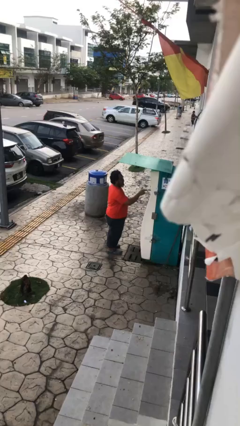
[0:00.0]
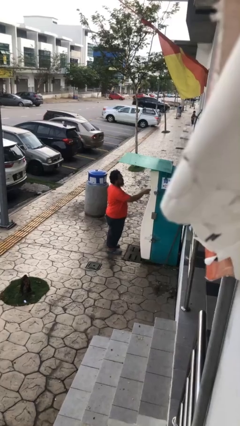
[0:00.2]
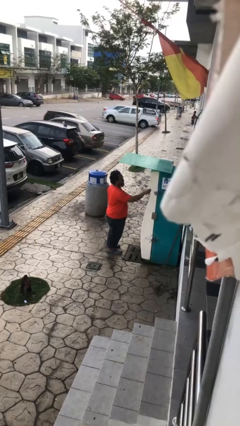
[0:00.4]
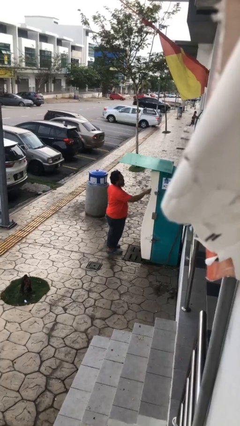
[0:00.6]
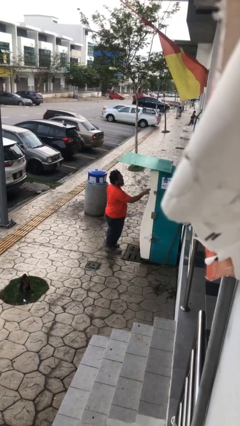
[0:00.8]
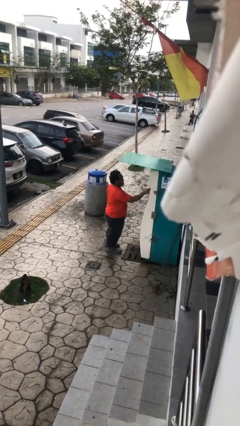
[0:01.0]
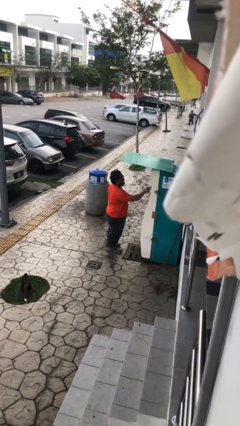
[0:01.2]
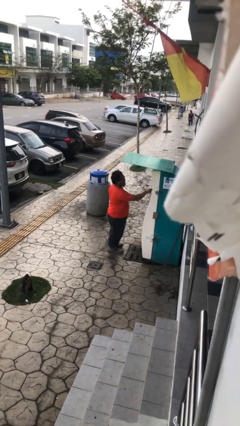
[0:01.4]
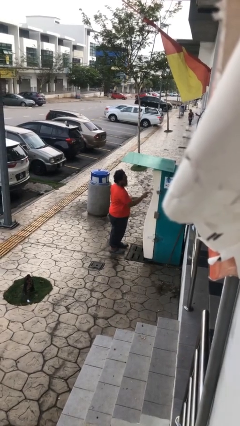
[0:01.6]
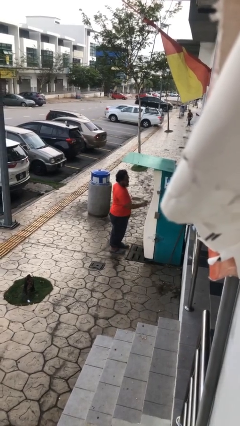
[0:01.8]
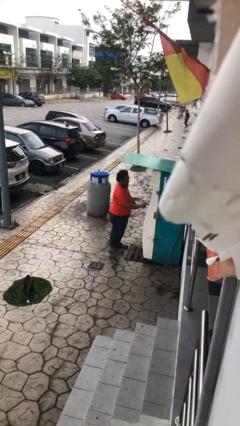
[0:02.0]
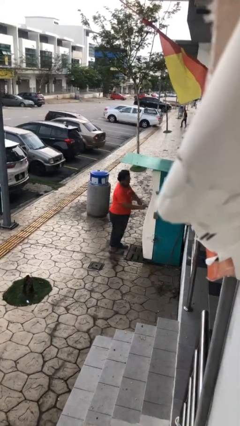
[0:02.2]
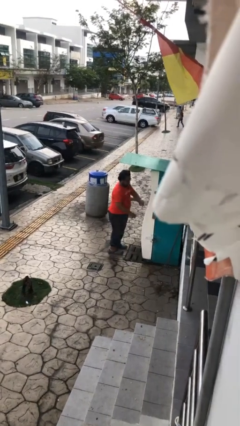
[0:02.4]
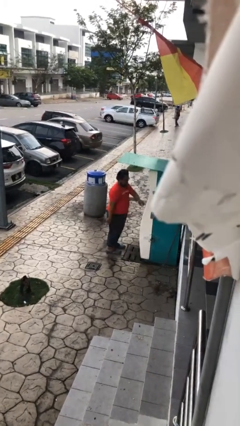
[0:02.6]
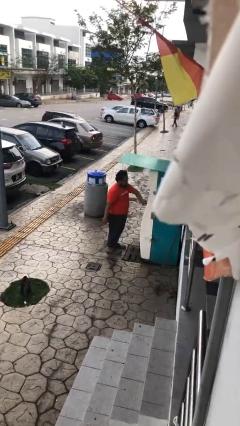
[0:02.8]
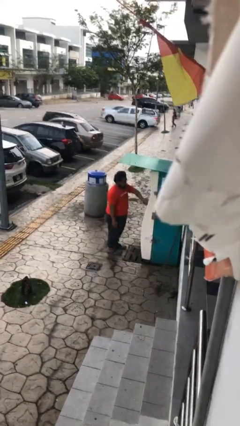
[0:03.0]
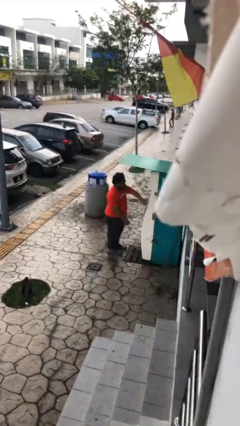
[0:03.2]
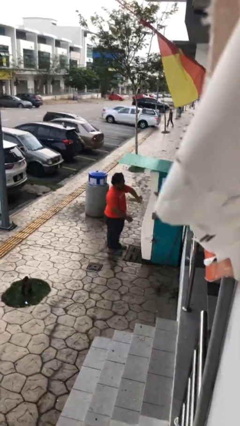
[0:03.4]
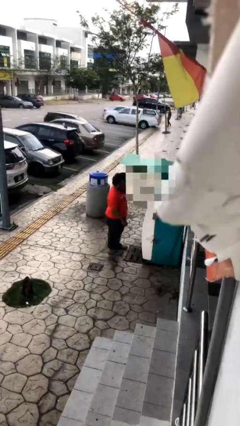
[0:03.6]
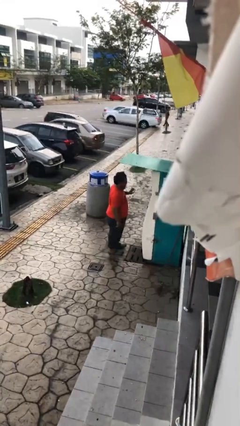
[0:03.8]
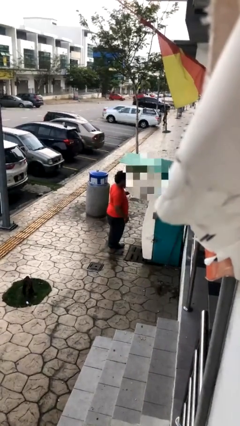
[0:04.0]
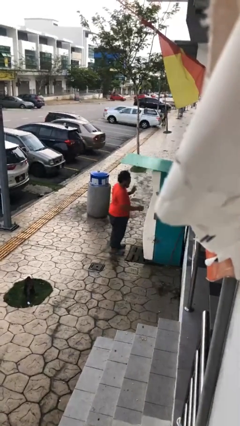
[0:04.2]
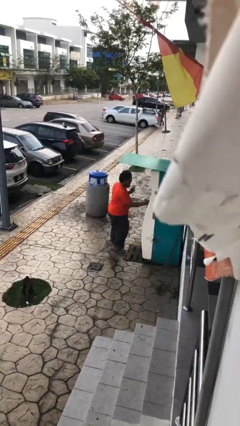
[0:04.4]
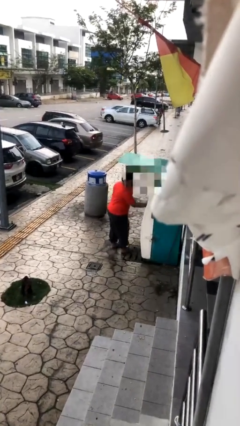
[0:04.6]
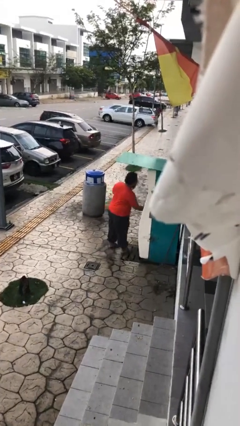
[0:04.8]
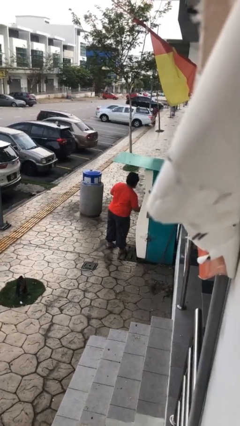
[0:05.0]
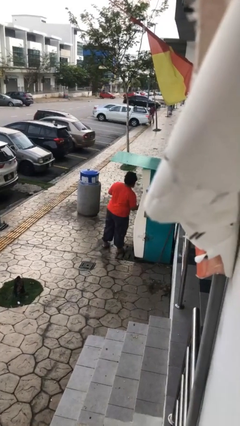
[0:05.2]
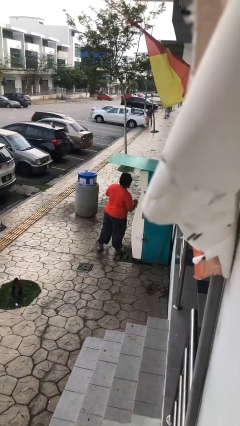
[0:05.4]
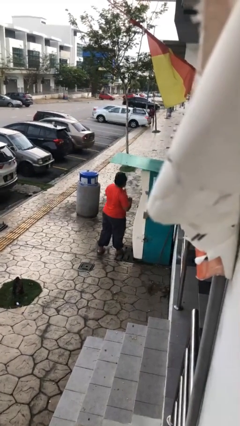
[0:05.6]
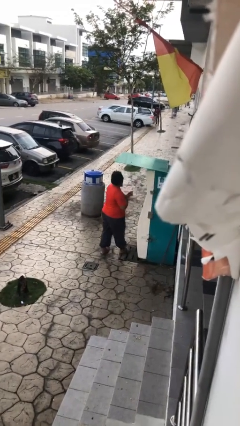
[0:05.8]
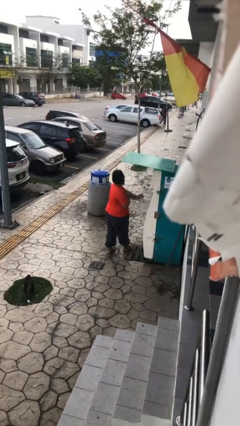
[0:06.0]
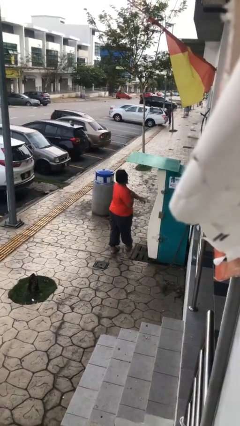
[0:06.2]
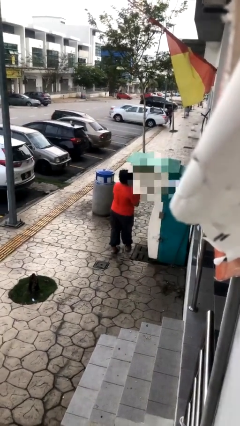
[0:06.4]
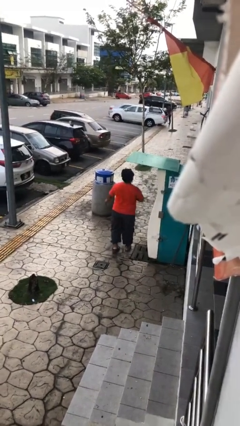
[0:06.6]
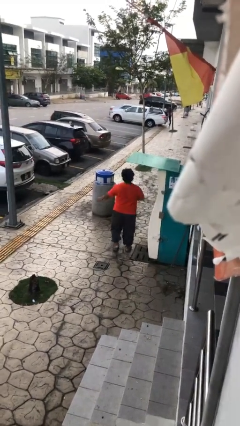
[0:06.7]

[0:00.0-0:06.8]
person purchases from machine

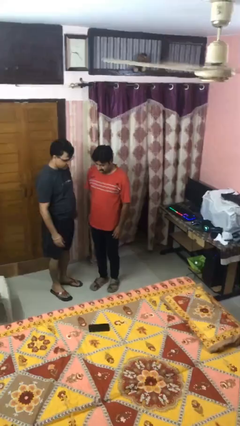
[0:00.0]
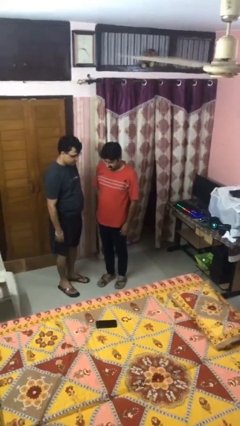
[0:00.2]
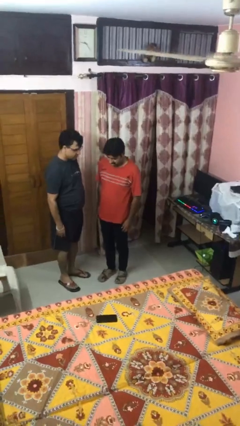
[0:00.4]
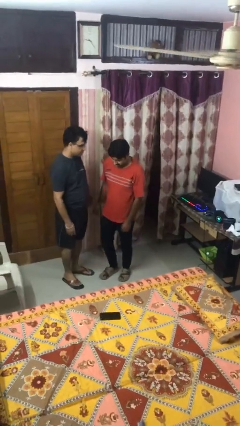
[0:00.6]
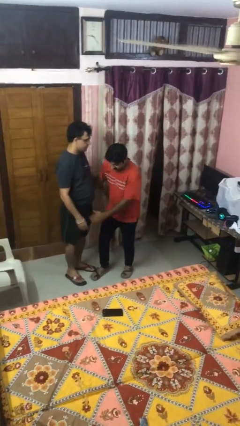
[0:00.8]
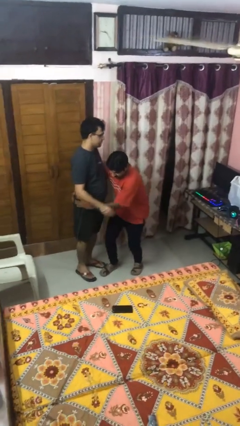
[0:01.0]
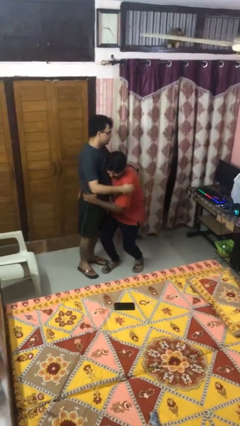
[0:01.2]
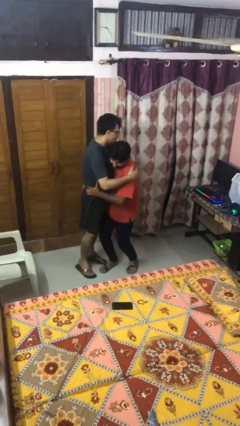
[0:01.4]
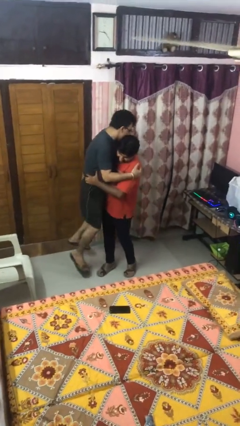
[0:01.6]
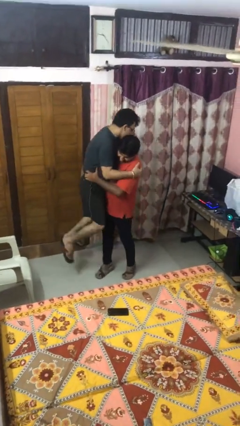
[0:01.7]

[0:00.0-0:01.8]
person picks up person

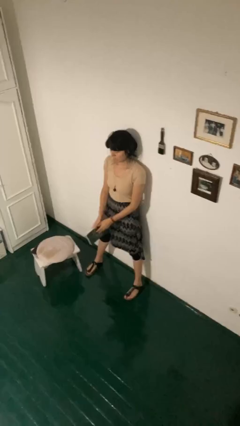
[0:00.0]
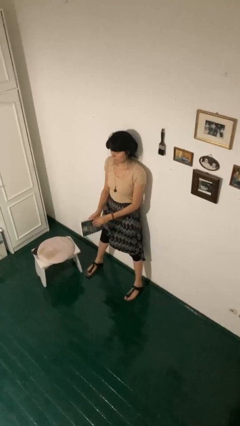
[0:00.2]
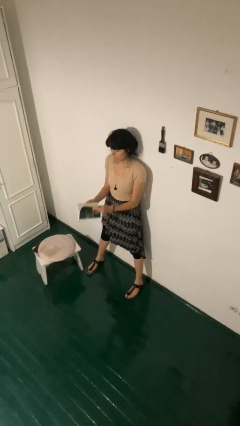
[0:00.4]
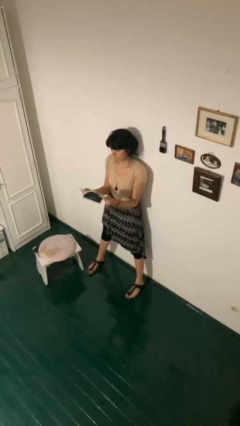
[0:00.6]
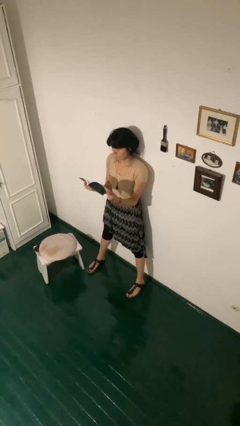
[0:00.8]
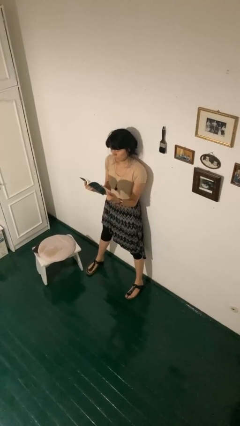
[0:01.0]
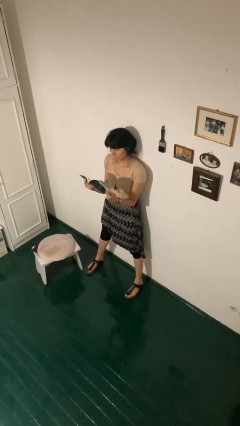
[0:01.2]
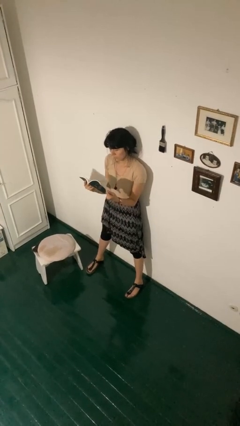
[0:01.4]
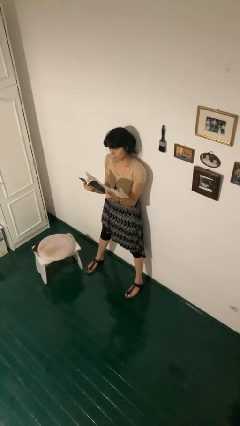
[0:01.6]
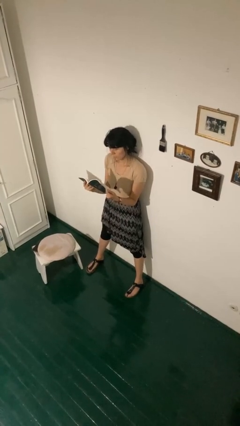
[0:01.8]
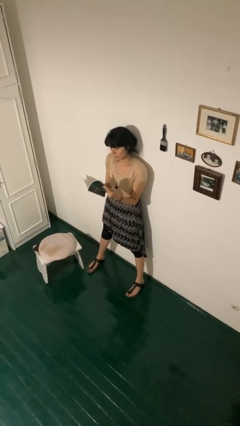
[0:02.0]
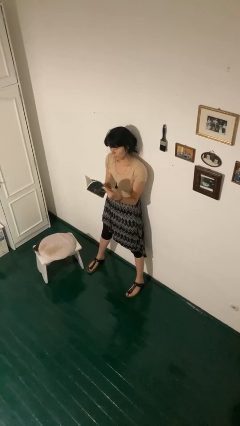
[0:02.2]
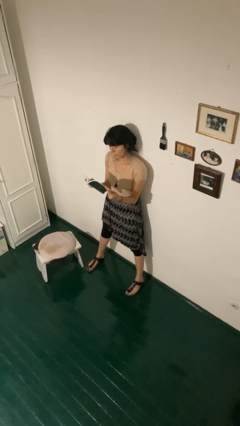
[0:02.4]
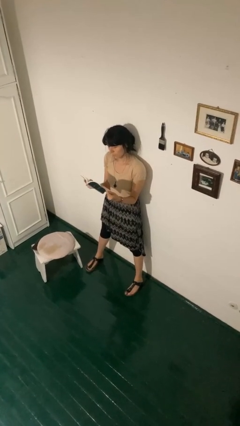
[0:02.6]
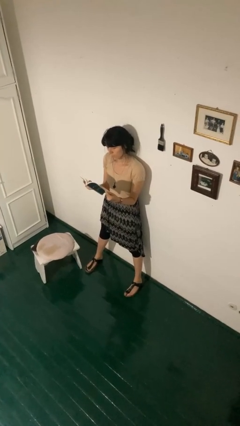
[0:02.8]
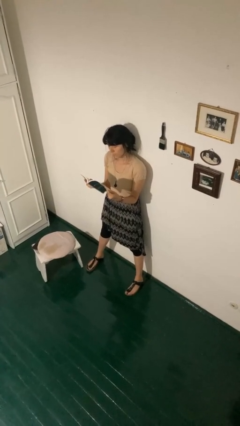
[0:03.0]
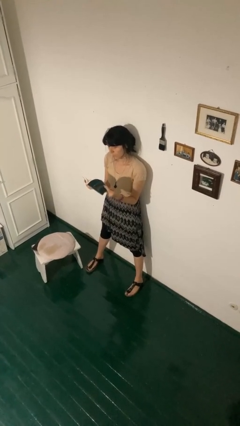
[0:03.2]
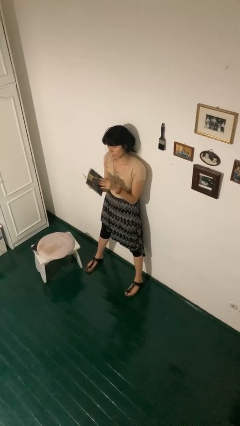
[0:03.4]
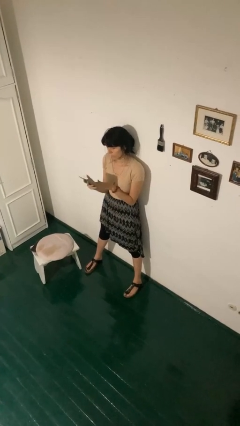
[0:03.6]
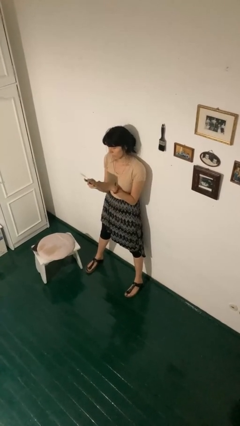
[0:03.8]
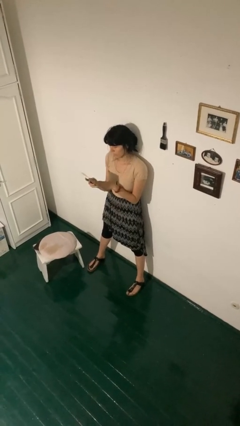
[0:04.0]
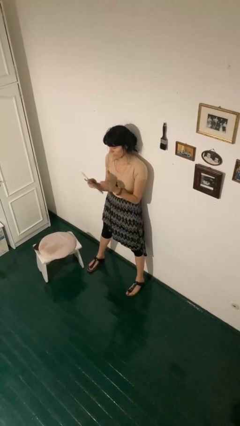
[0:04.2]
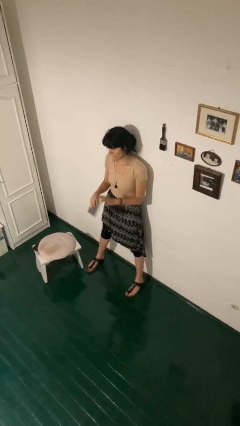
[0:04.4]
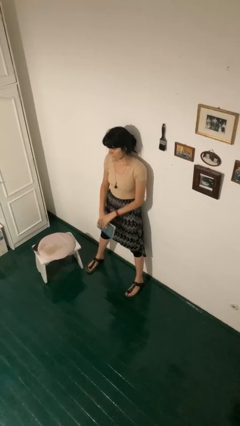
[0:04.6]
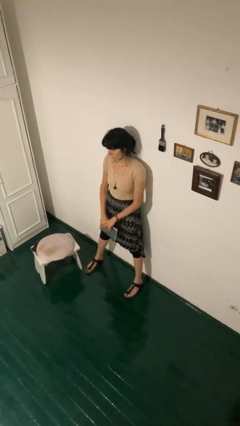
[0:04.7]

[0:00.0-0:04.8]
person reads book

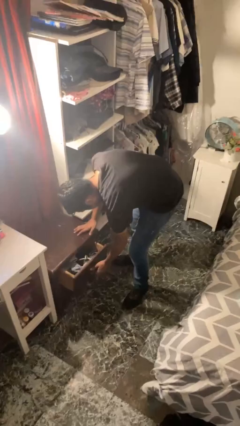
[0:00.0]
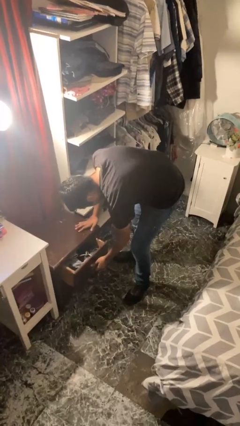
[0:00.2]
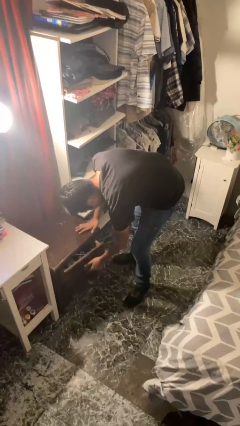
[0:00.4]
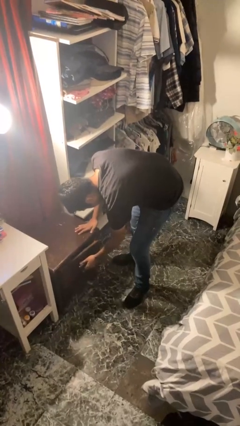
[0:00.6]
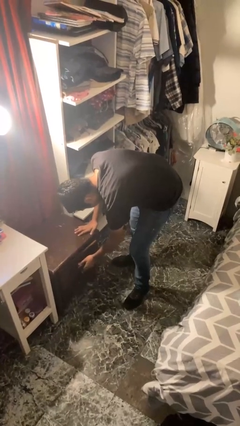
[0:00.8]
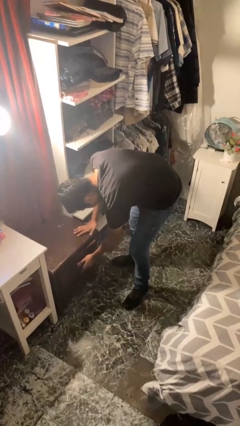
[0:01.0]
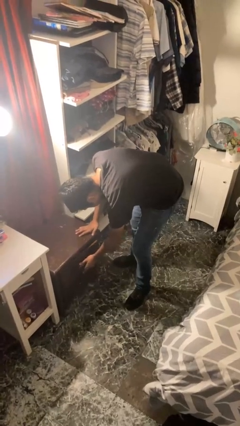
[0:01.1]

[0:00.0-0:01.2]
person closes dresser drawer

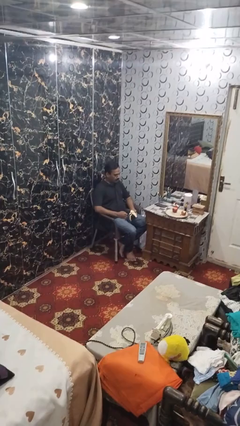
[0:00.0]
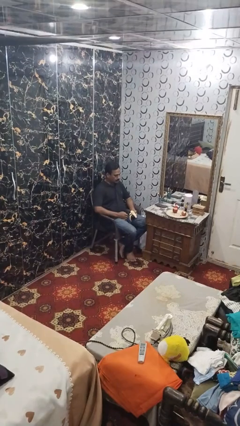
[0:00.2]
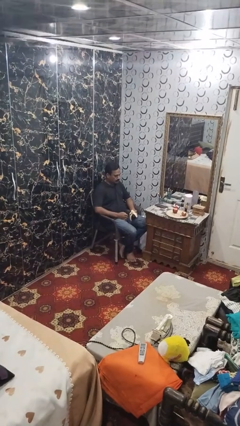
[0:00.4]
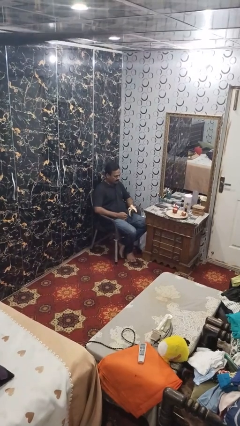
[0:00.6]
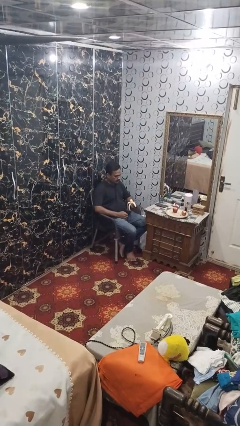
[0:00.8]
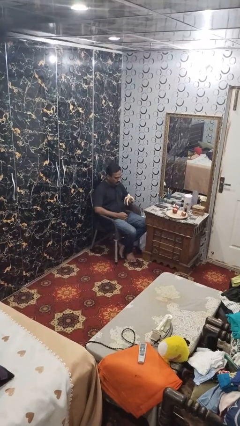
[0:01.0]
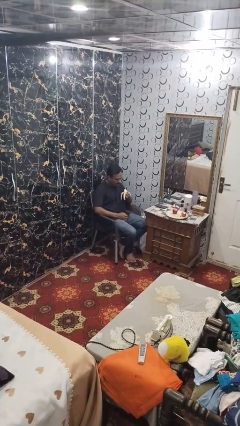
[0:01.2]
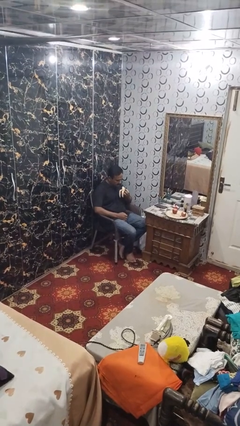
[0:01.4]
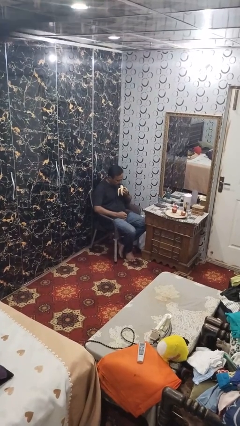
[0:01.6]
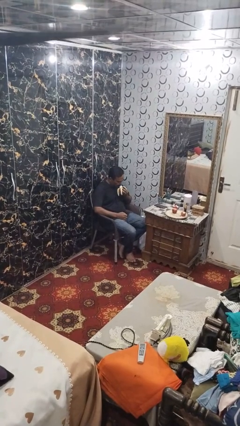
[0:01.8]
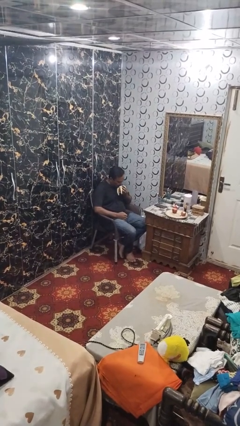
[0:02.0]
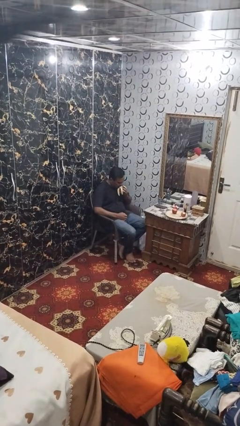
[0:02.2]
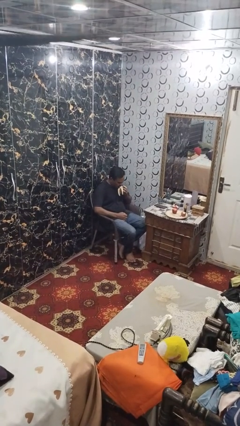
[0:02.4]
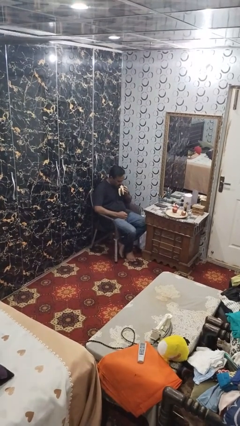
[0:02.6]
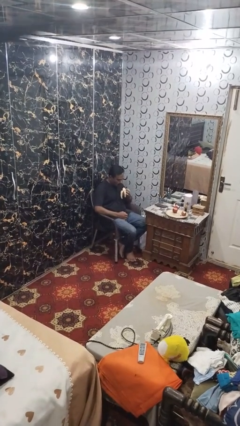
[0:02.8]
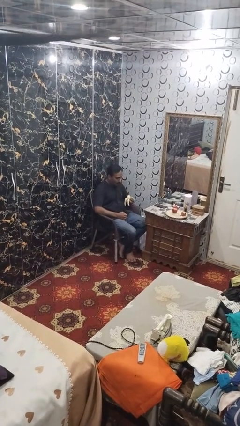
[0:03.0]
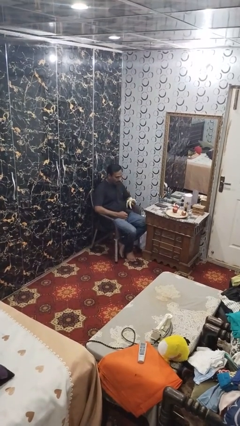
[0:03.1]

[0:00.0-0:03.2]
person eats banana
